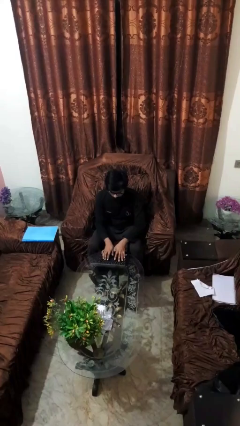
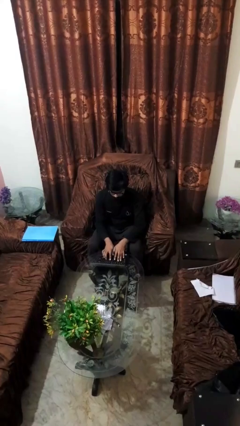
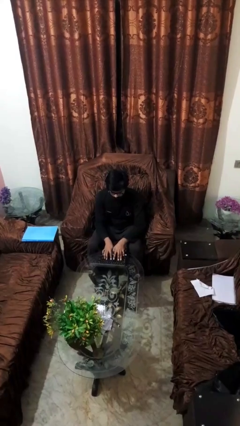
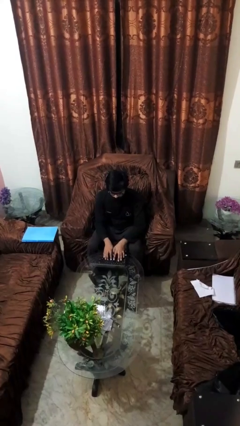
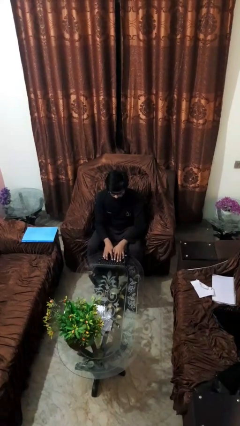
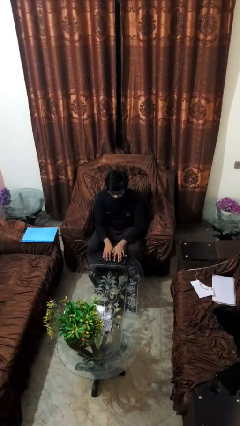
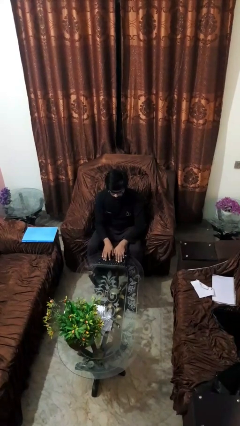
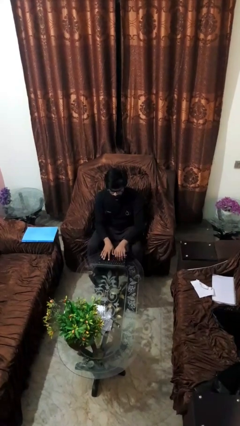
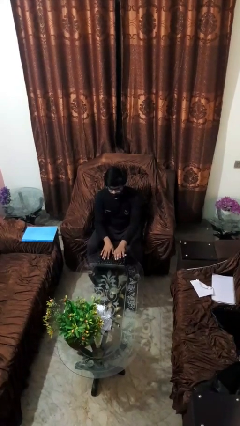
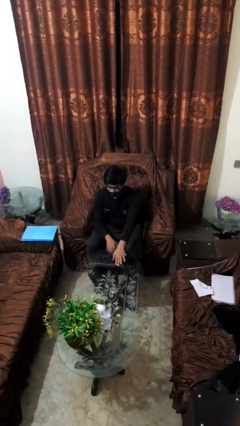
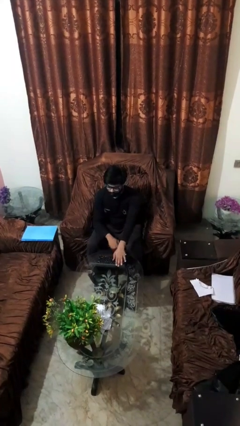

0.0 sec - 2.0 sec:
person interacts with laptop

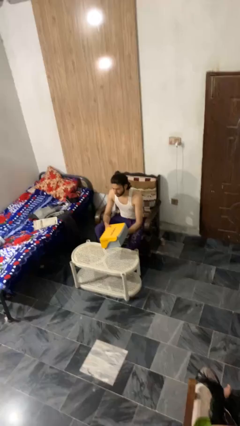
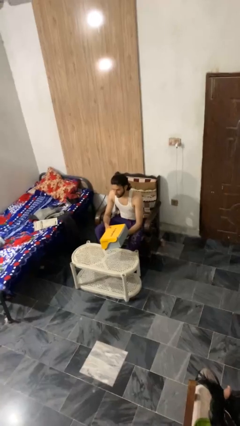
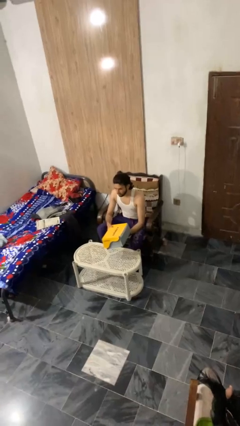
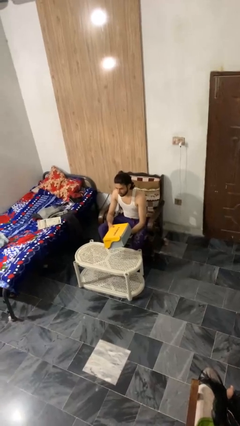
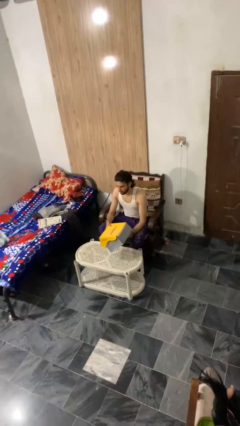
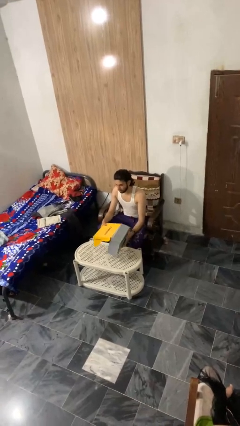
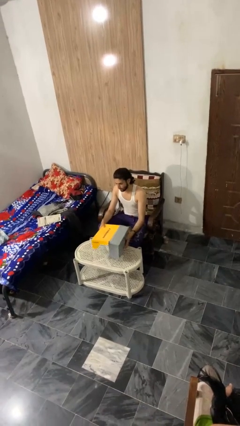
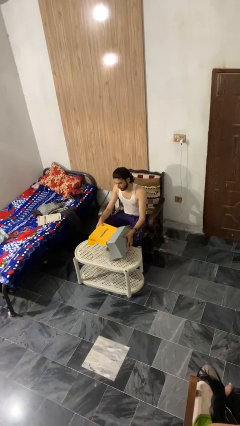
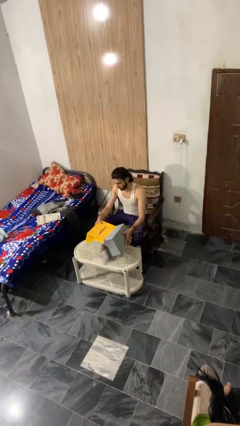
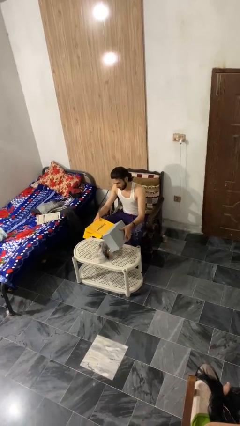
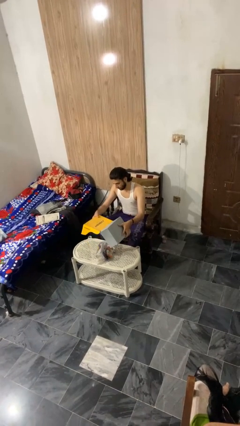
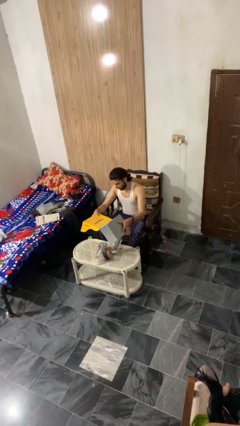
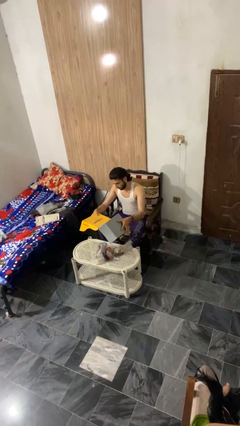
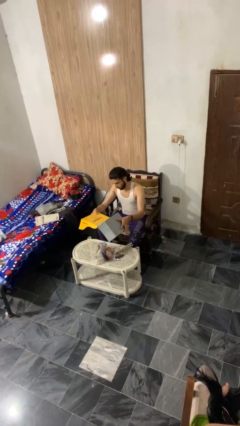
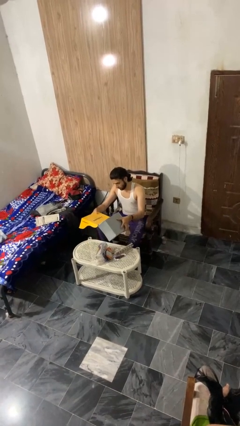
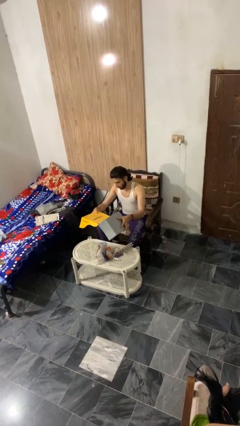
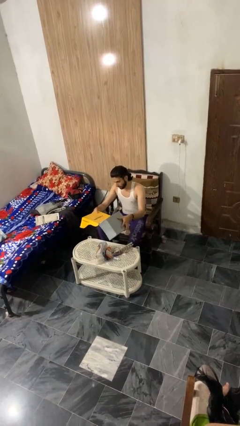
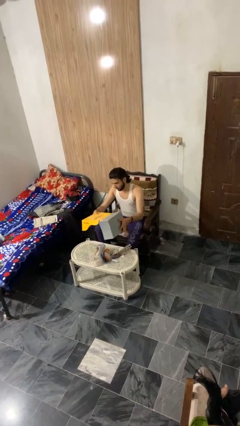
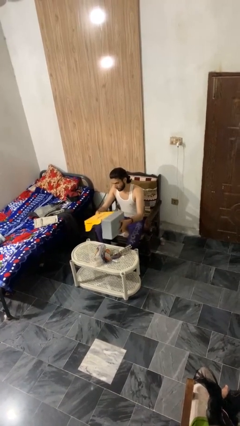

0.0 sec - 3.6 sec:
person unloads box onto table

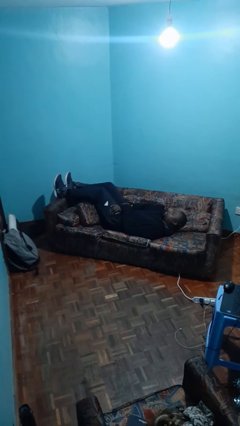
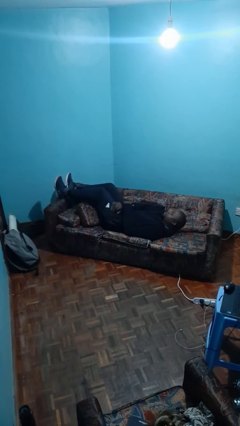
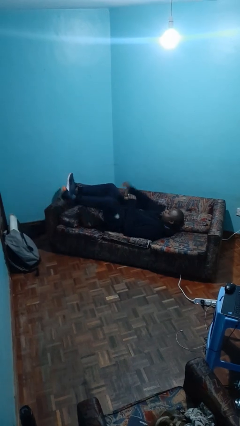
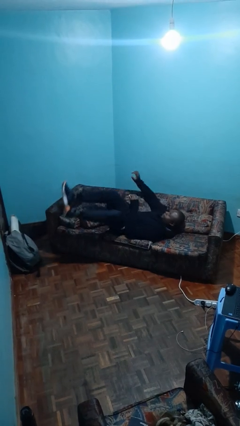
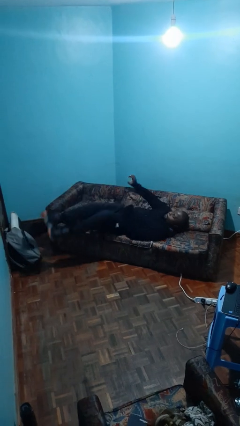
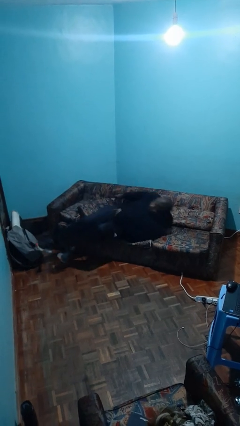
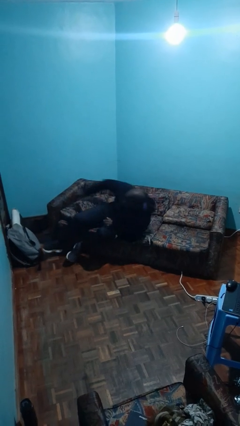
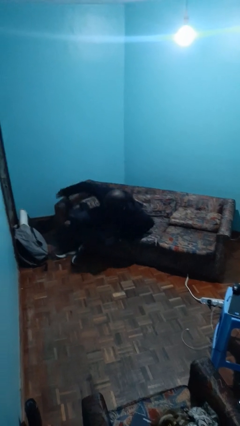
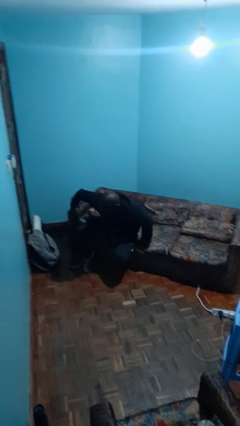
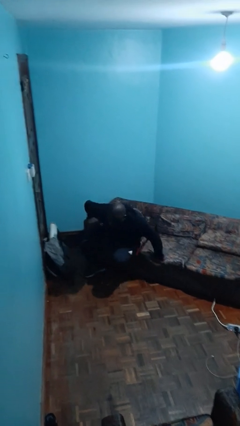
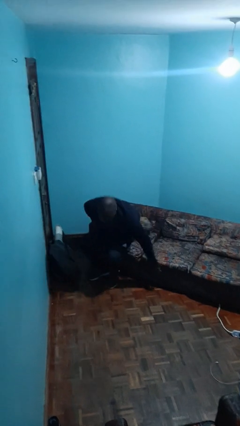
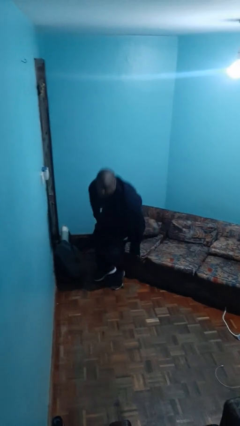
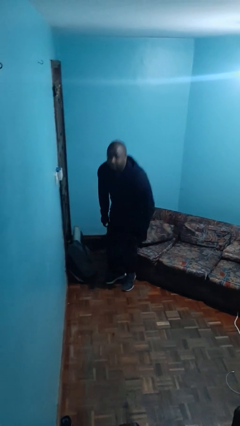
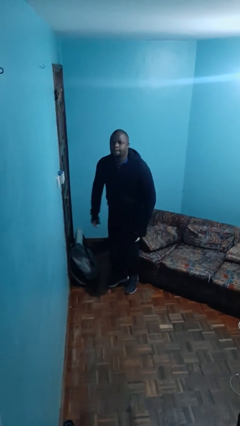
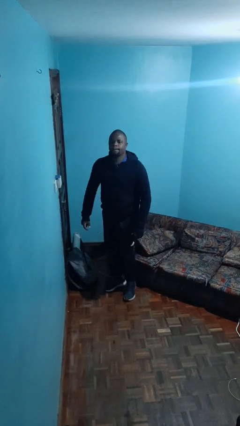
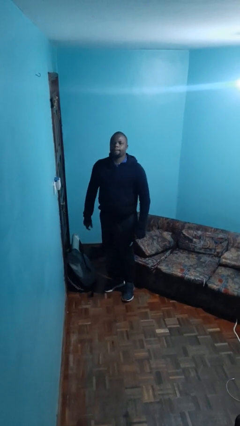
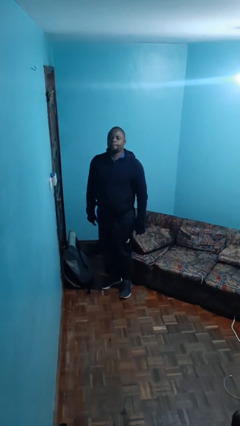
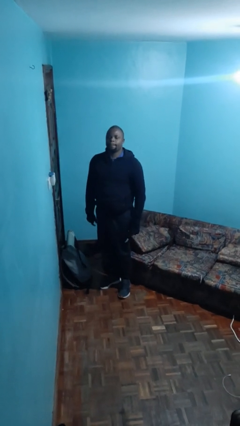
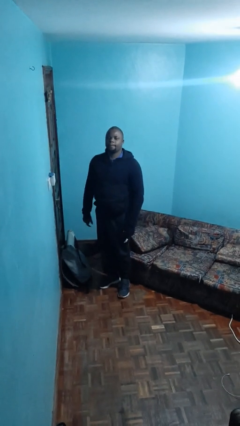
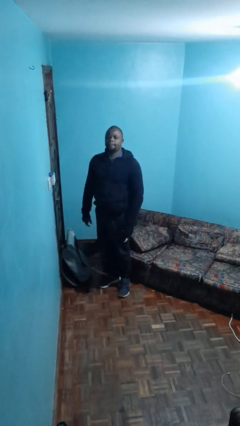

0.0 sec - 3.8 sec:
person stands up

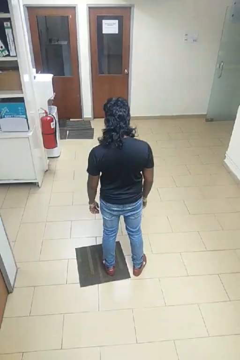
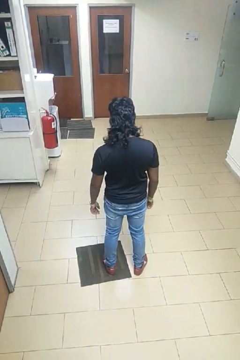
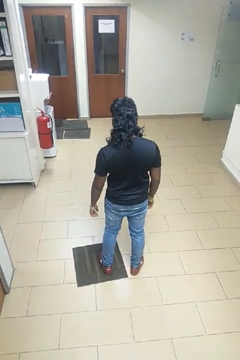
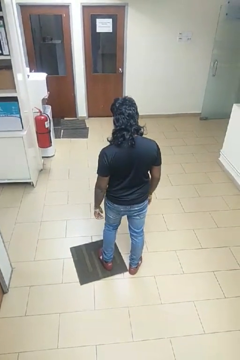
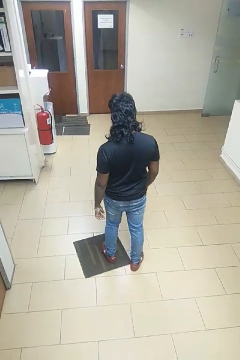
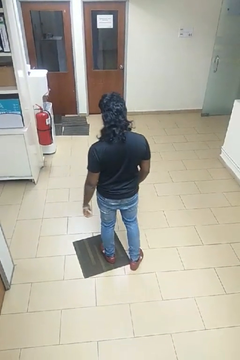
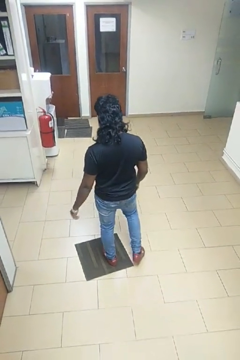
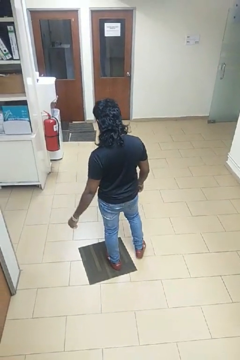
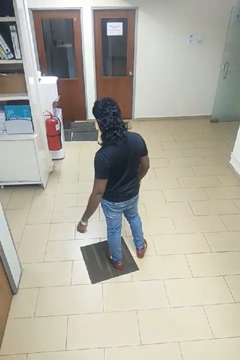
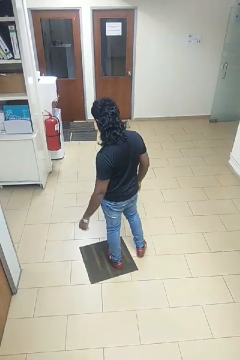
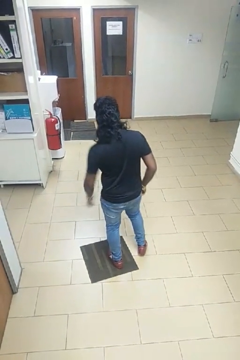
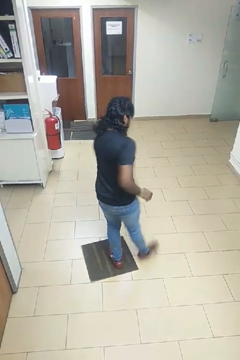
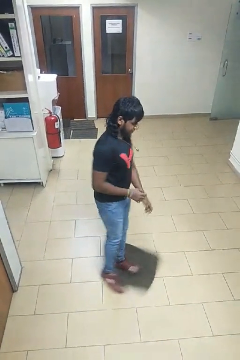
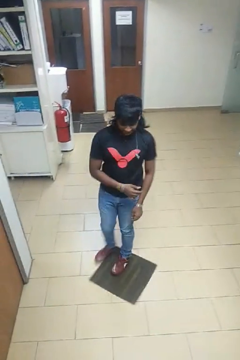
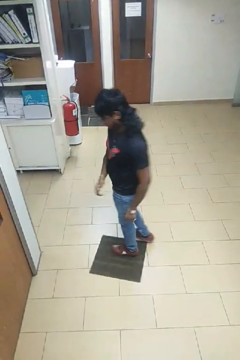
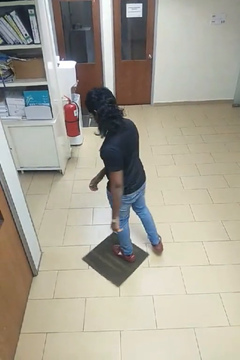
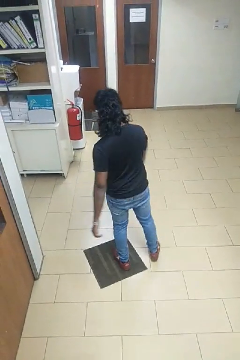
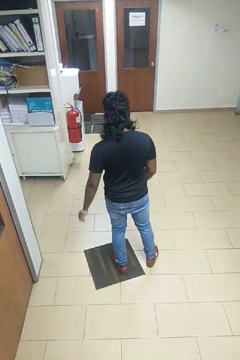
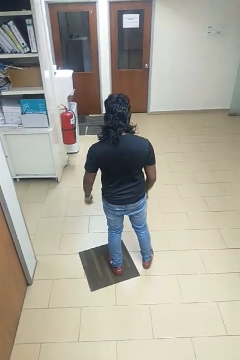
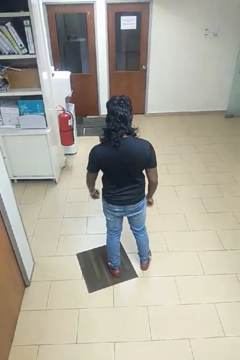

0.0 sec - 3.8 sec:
person twirls

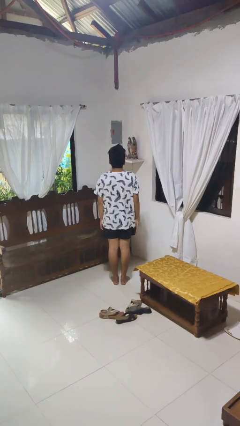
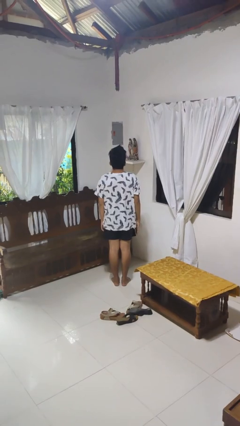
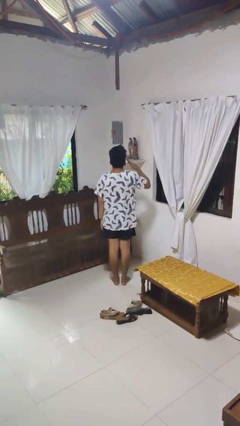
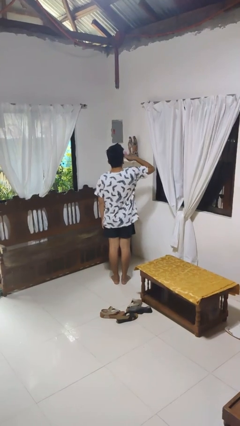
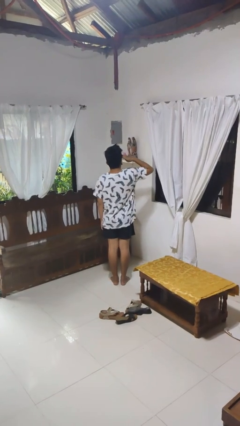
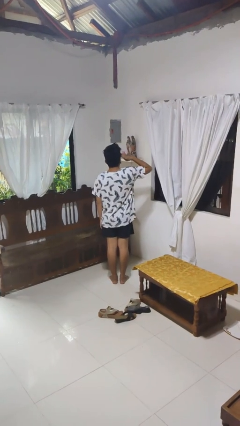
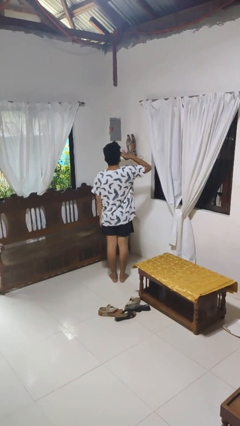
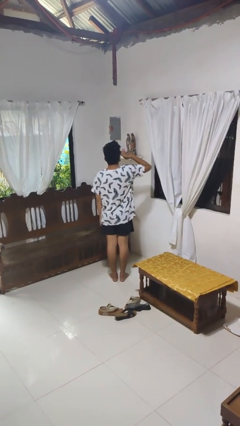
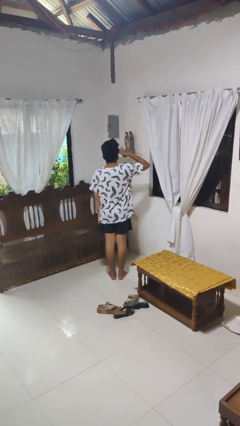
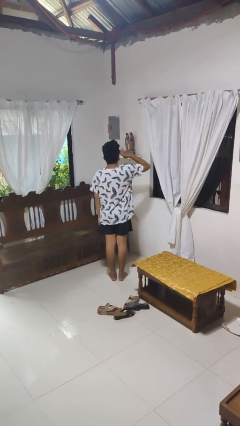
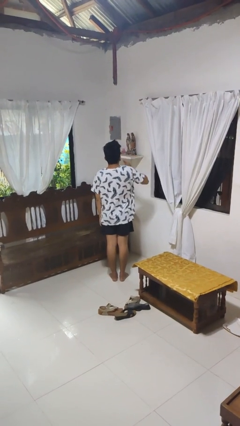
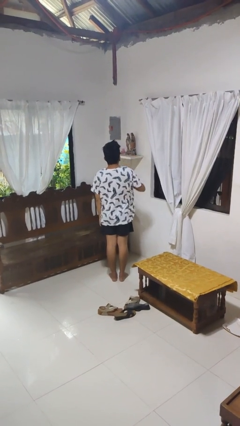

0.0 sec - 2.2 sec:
person salutes

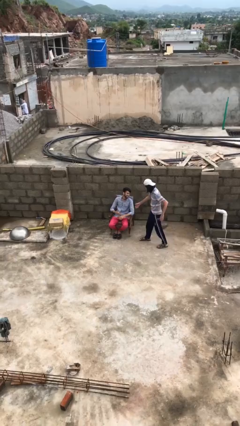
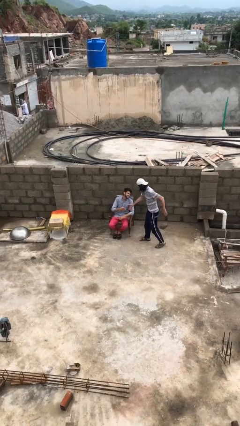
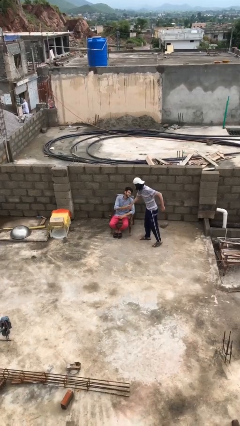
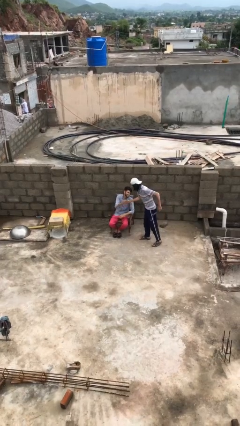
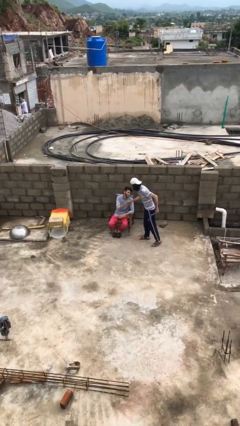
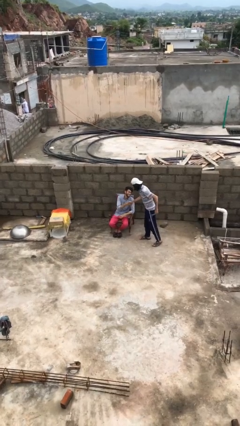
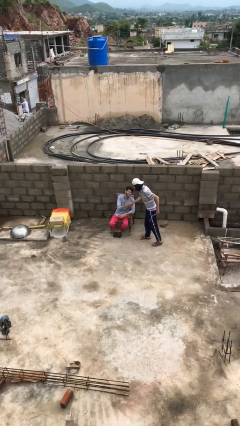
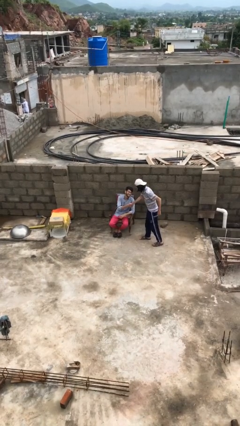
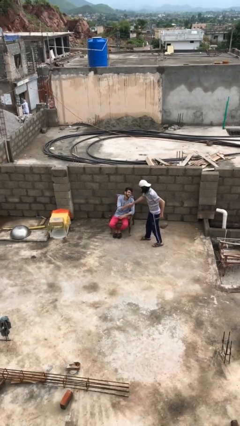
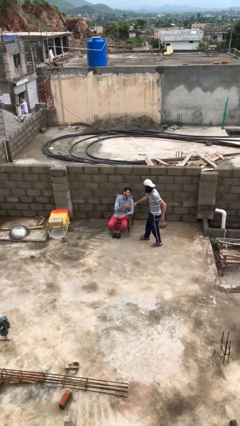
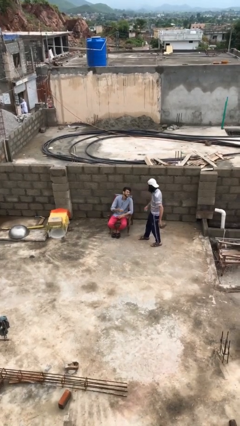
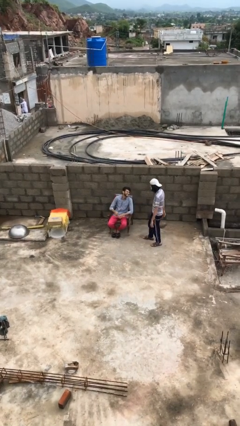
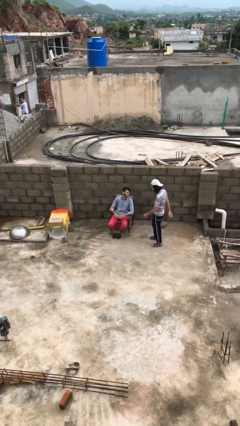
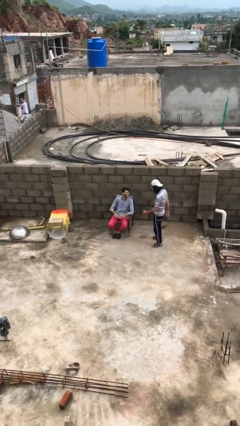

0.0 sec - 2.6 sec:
person shakes hand
